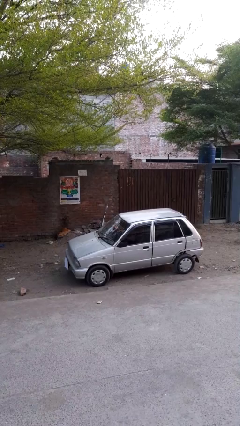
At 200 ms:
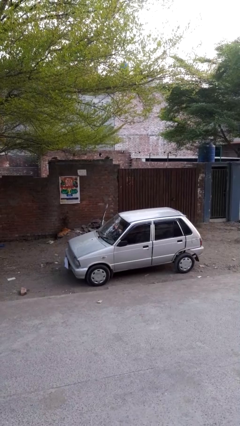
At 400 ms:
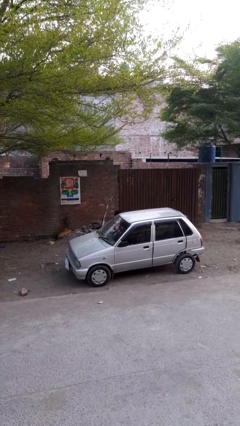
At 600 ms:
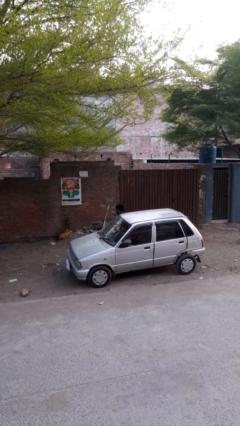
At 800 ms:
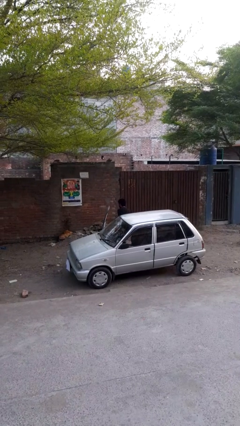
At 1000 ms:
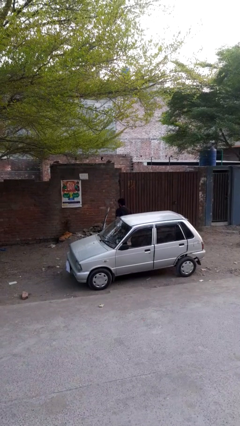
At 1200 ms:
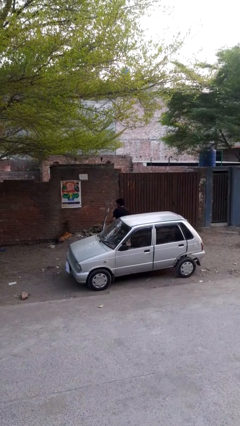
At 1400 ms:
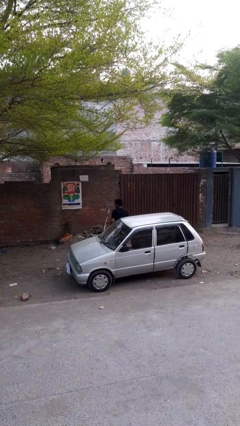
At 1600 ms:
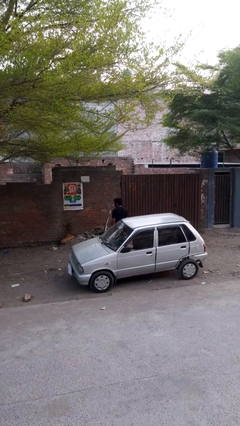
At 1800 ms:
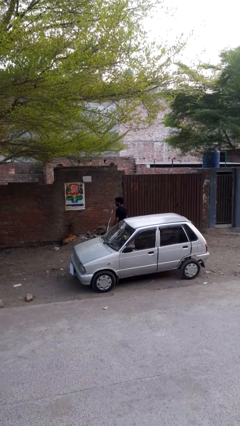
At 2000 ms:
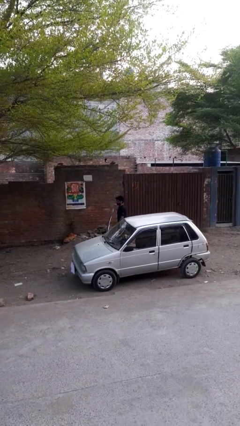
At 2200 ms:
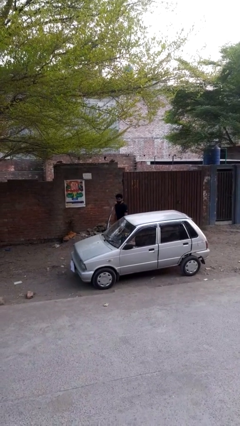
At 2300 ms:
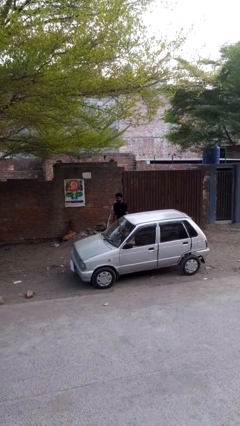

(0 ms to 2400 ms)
person exits car

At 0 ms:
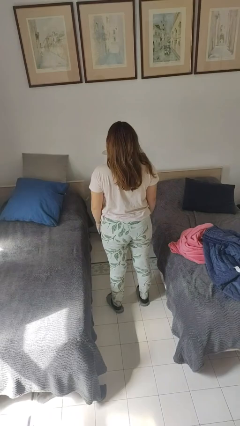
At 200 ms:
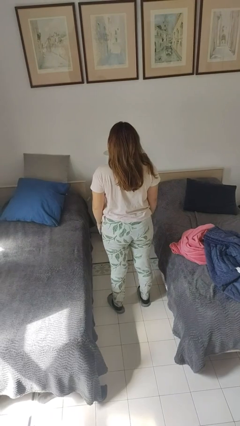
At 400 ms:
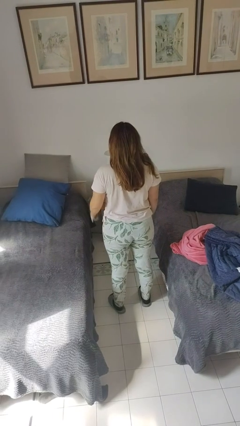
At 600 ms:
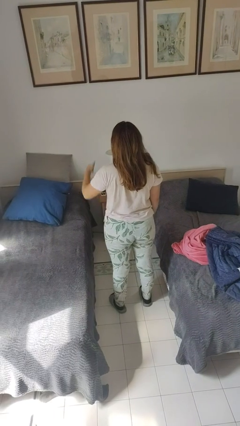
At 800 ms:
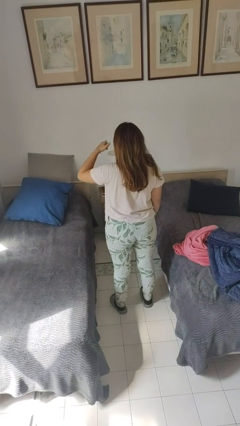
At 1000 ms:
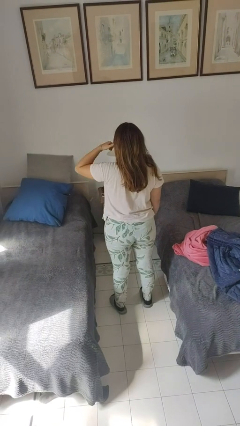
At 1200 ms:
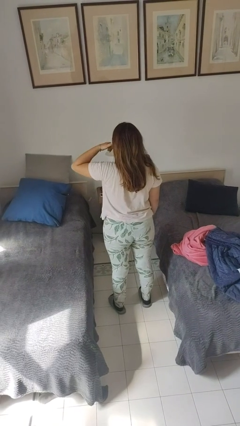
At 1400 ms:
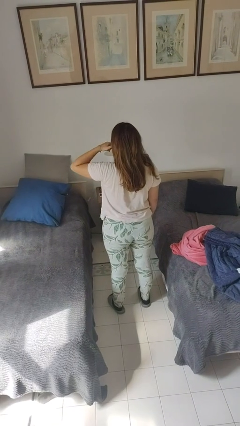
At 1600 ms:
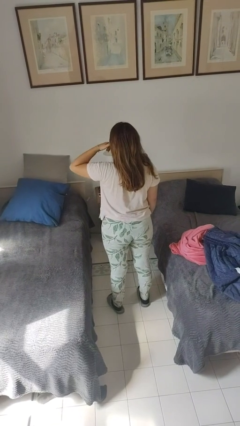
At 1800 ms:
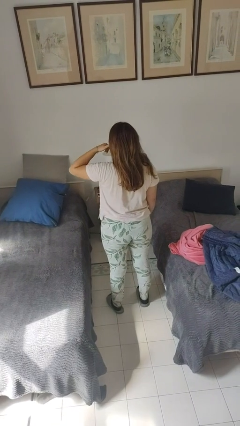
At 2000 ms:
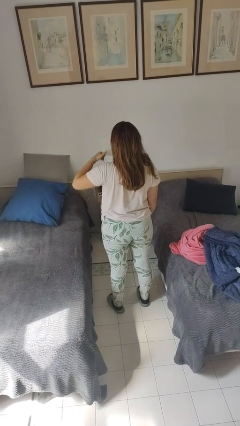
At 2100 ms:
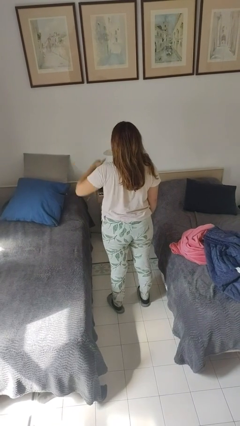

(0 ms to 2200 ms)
person gestures call me

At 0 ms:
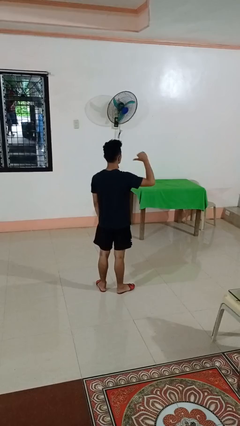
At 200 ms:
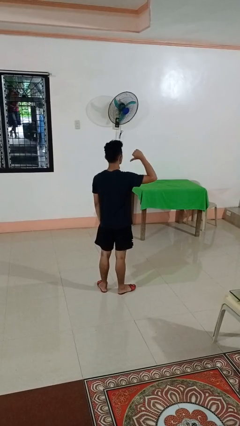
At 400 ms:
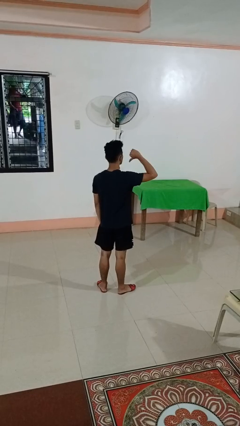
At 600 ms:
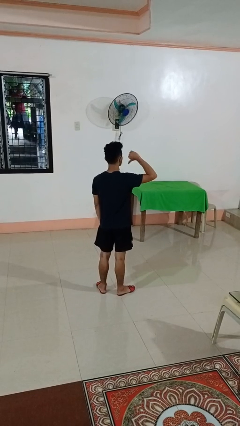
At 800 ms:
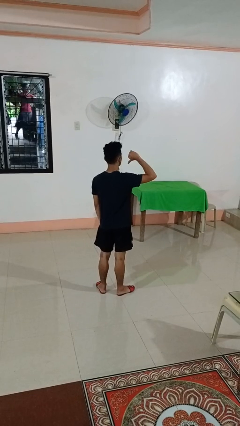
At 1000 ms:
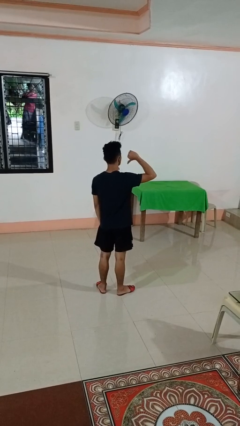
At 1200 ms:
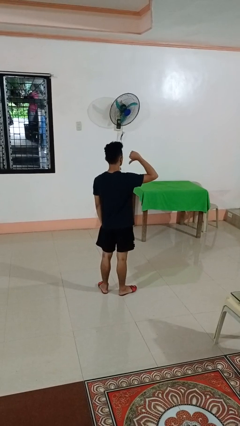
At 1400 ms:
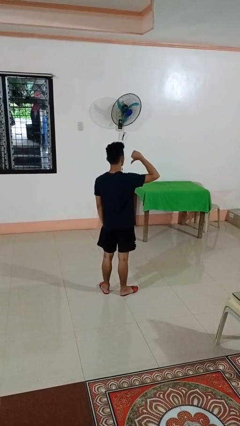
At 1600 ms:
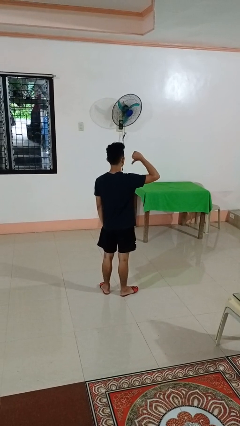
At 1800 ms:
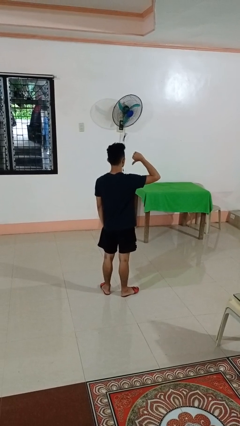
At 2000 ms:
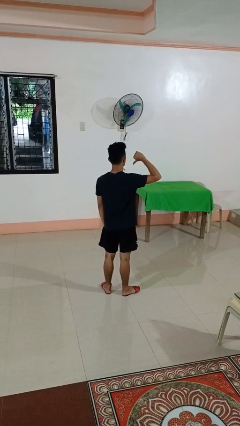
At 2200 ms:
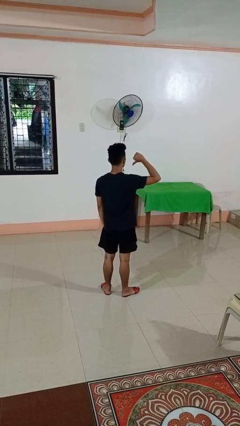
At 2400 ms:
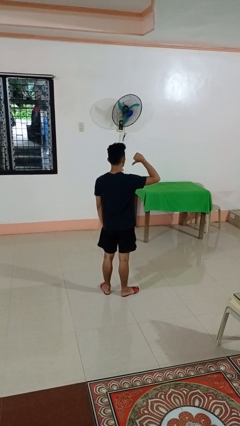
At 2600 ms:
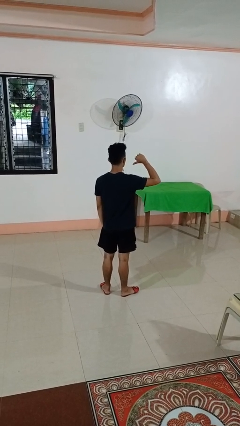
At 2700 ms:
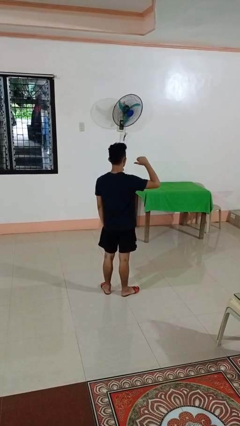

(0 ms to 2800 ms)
person gestures thumbs down

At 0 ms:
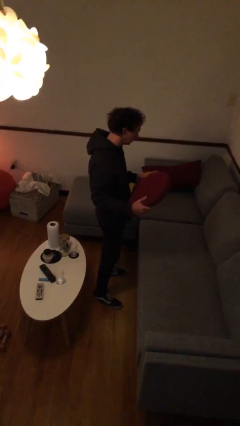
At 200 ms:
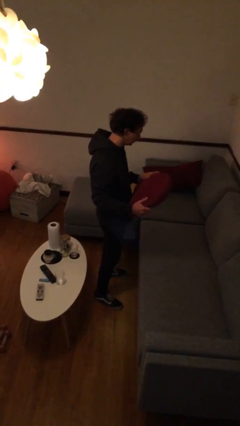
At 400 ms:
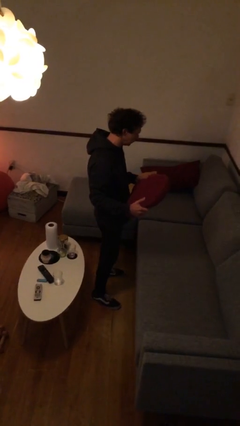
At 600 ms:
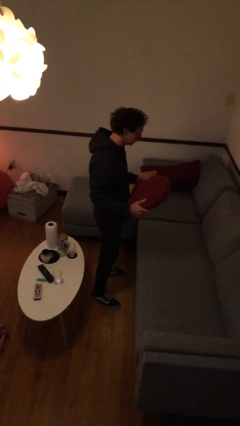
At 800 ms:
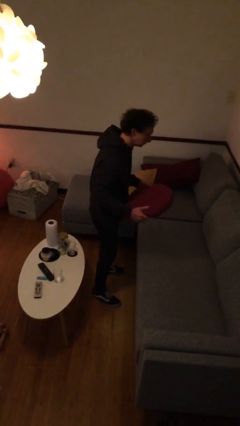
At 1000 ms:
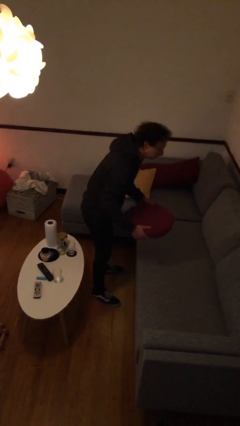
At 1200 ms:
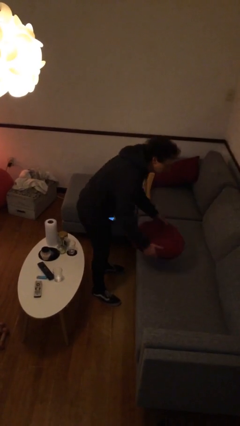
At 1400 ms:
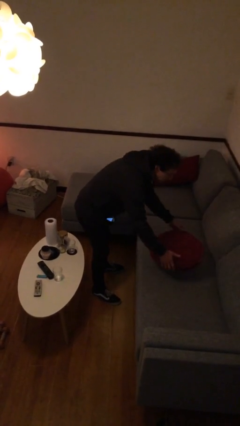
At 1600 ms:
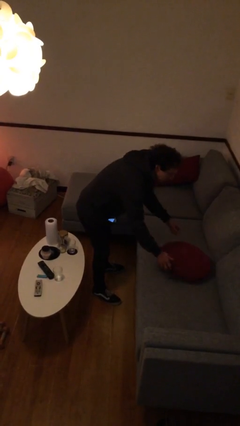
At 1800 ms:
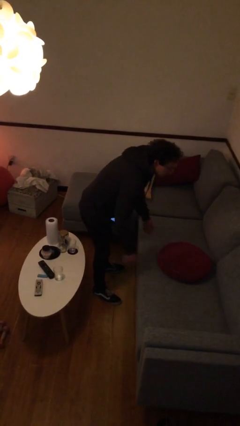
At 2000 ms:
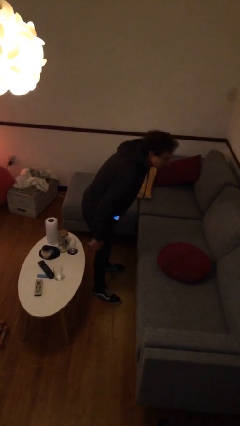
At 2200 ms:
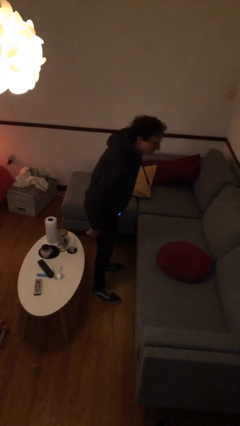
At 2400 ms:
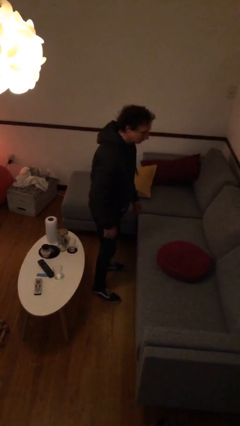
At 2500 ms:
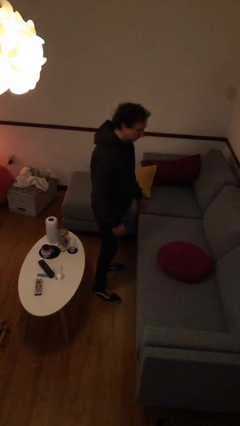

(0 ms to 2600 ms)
person puts down object on couch

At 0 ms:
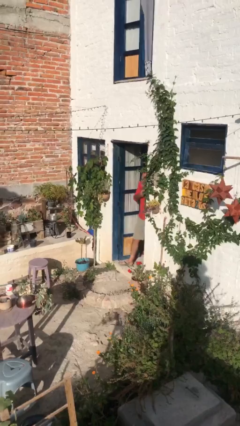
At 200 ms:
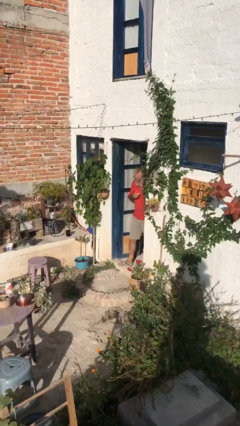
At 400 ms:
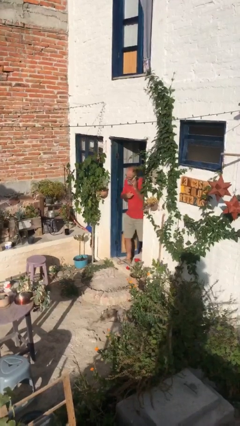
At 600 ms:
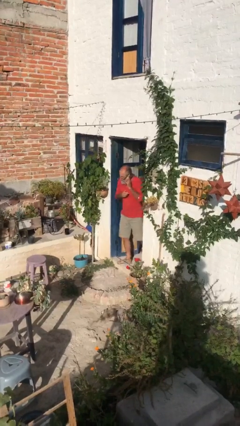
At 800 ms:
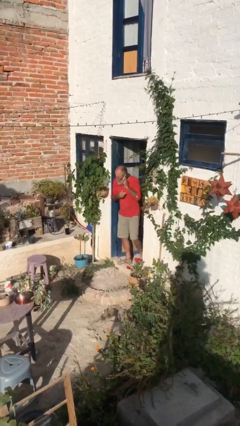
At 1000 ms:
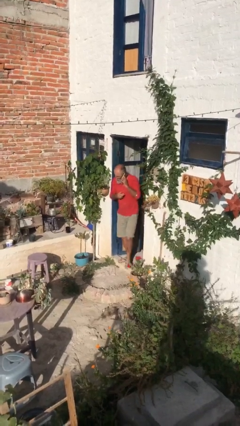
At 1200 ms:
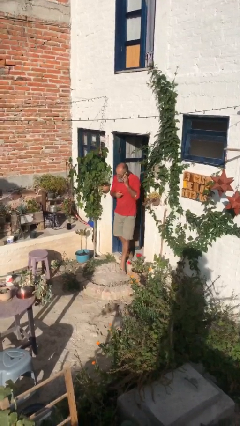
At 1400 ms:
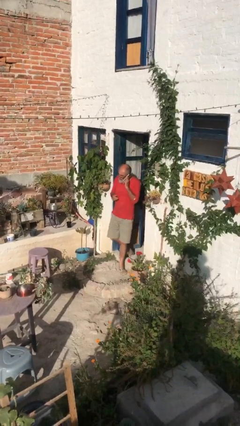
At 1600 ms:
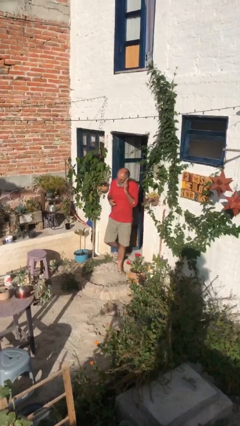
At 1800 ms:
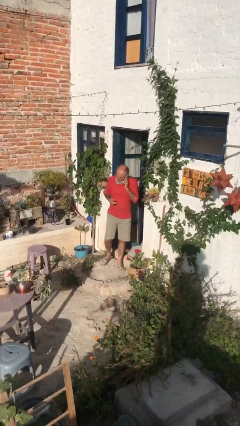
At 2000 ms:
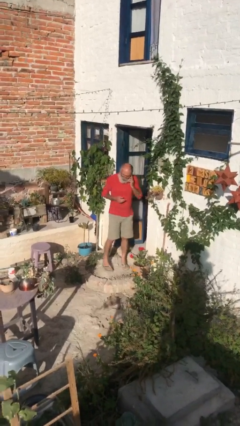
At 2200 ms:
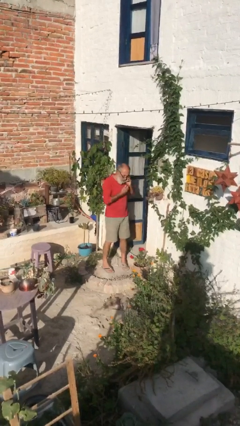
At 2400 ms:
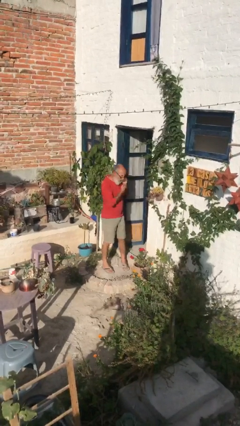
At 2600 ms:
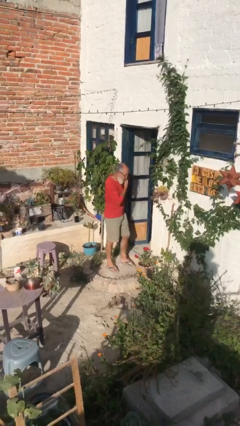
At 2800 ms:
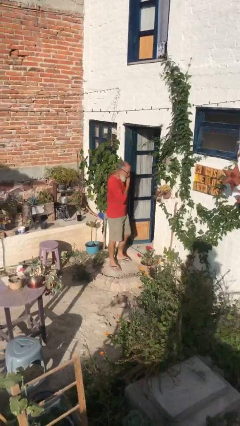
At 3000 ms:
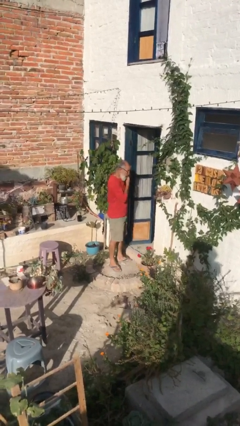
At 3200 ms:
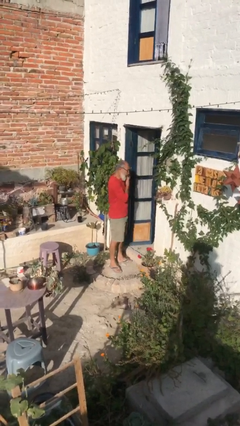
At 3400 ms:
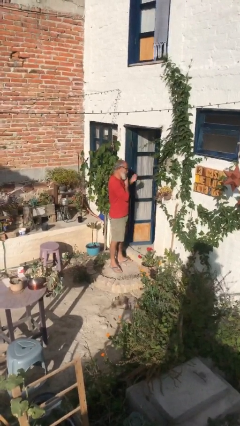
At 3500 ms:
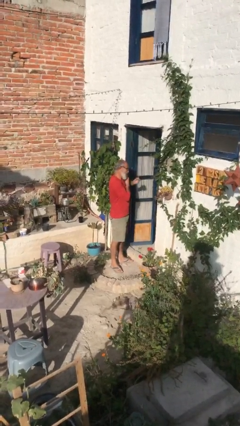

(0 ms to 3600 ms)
person enters scene through structure

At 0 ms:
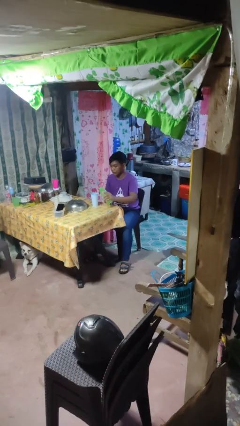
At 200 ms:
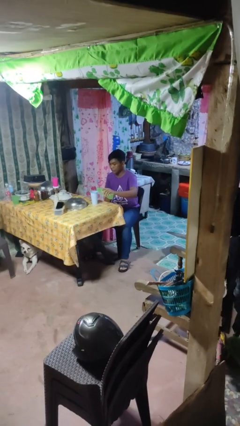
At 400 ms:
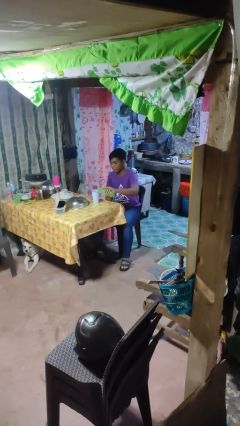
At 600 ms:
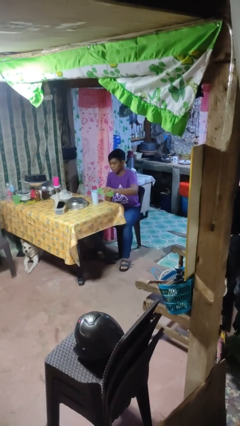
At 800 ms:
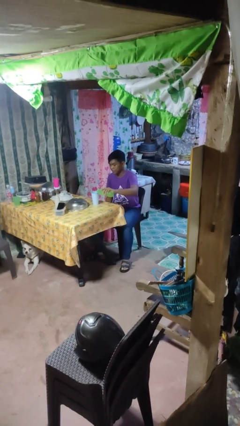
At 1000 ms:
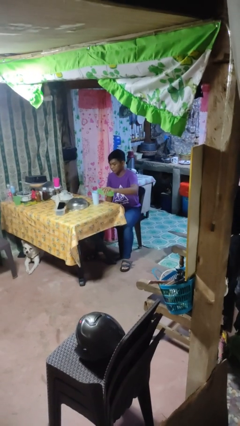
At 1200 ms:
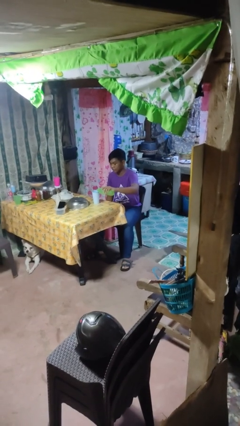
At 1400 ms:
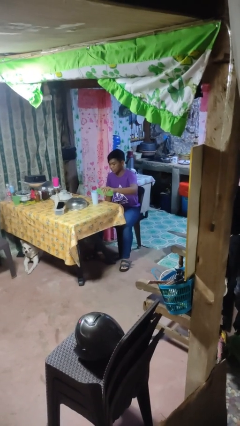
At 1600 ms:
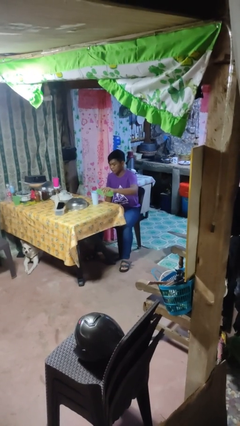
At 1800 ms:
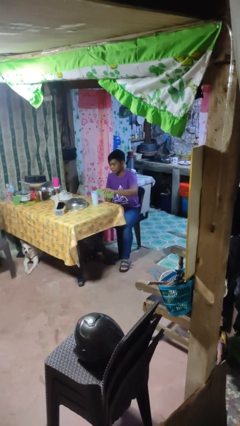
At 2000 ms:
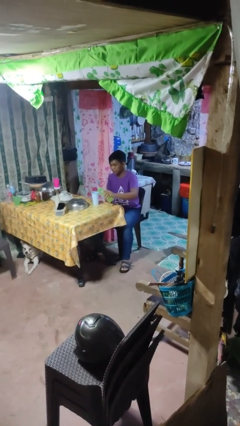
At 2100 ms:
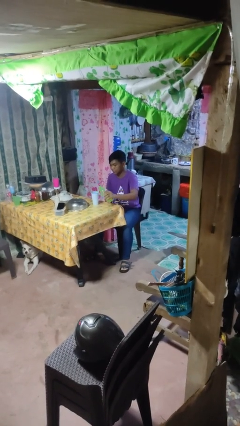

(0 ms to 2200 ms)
person pours liquid into cup

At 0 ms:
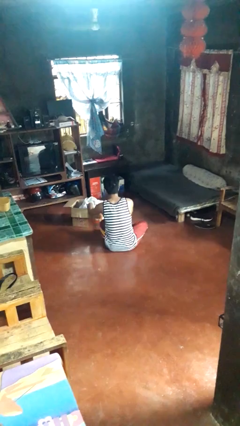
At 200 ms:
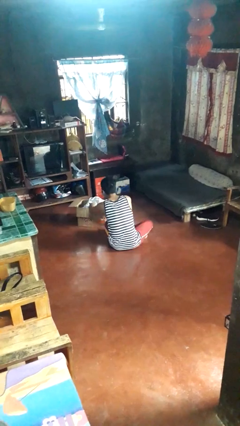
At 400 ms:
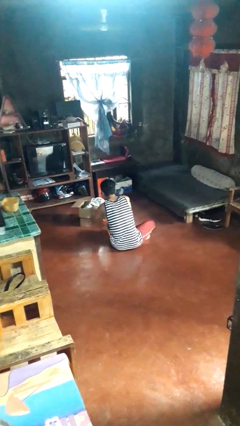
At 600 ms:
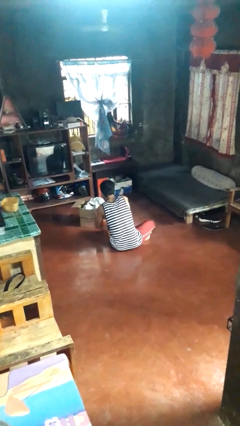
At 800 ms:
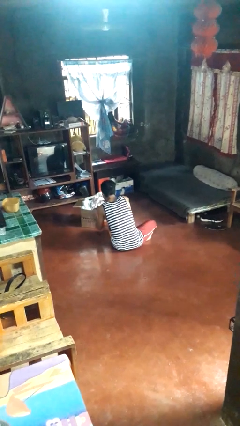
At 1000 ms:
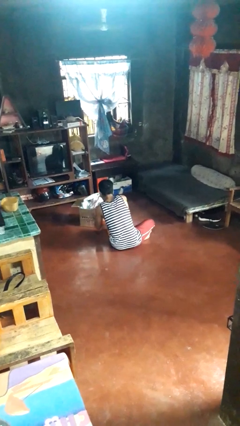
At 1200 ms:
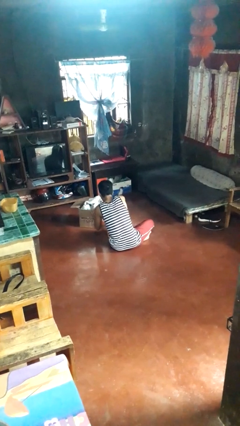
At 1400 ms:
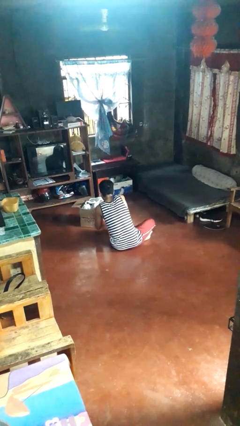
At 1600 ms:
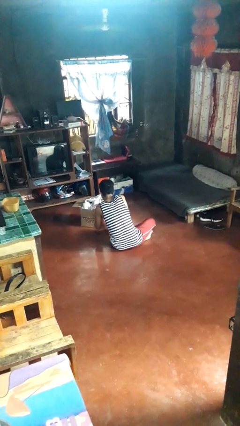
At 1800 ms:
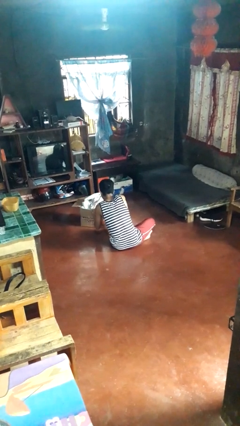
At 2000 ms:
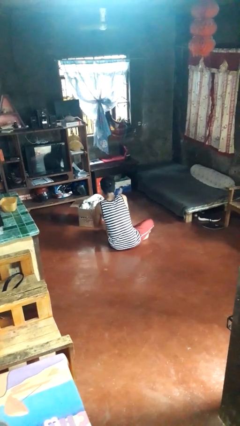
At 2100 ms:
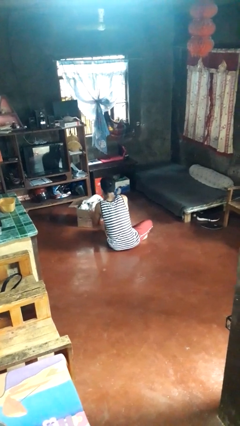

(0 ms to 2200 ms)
person searches in box
